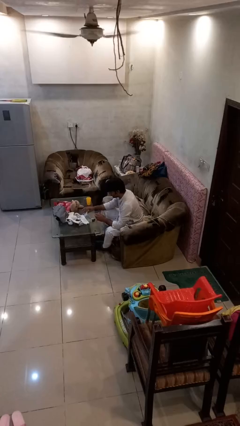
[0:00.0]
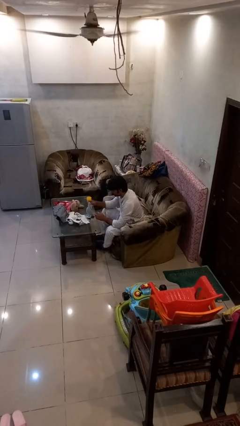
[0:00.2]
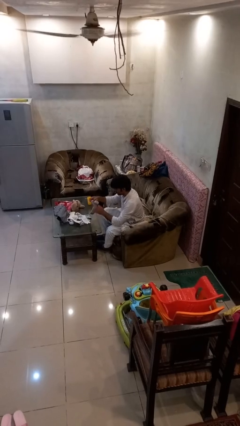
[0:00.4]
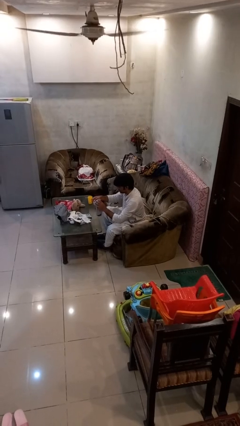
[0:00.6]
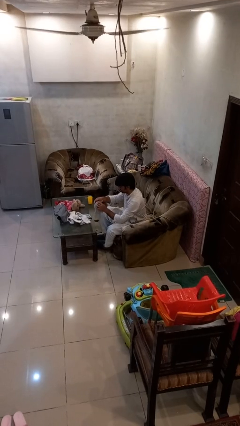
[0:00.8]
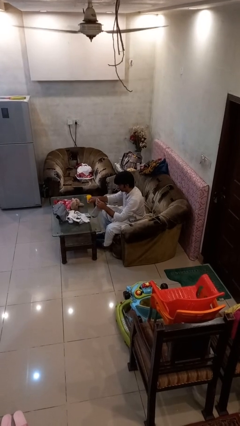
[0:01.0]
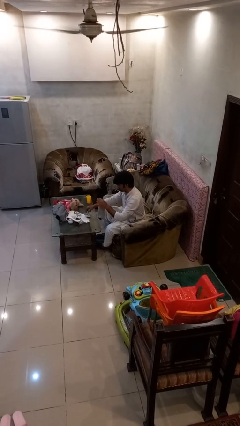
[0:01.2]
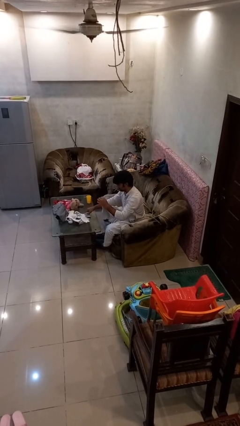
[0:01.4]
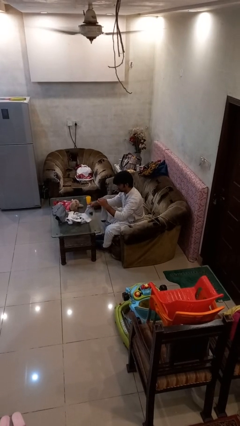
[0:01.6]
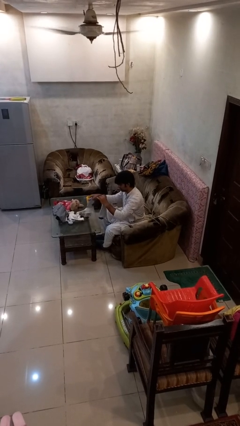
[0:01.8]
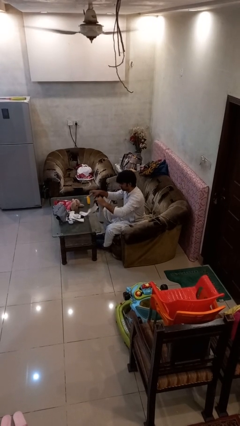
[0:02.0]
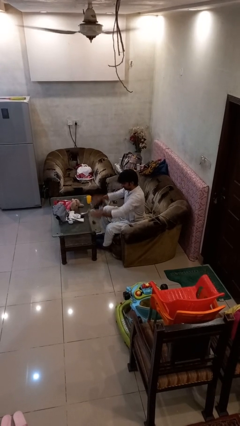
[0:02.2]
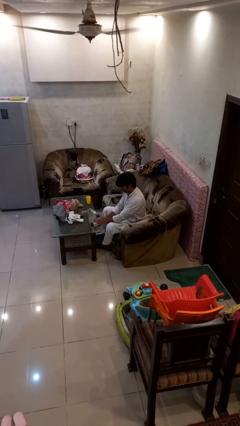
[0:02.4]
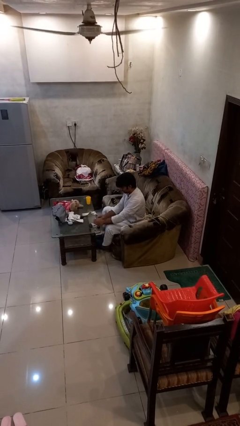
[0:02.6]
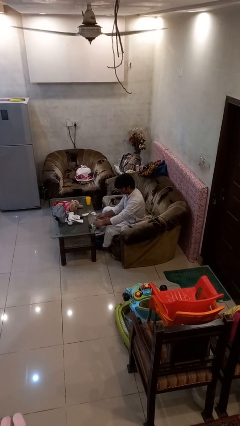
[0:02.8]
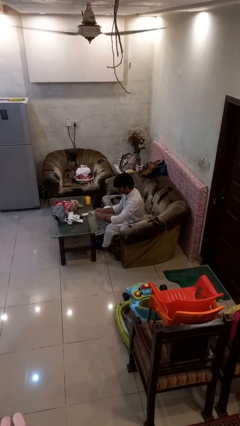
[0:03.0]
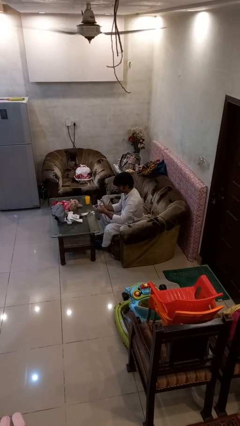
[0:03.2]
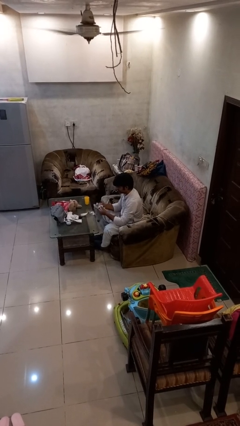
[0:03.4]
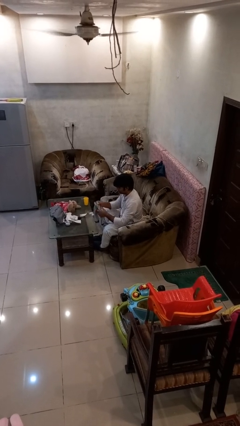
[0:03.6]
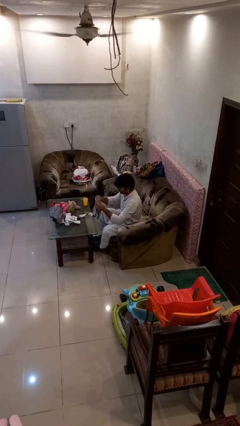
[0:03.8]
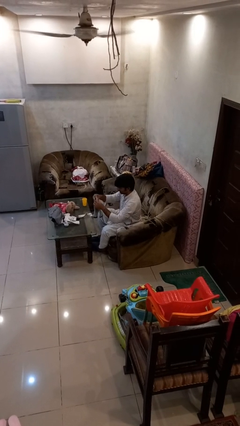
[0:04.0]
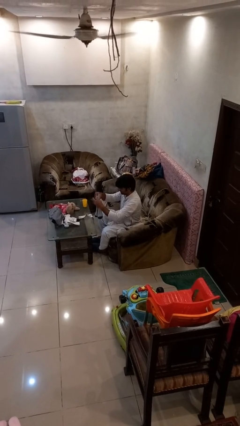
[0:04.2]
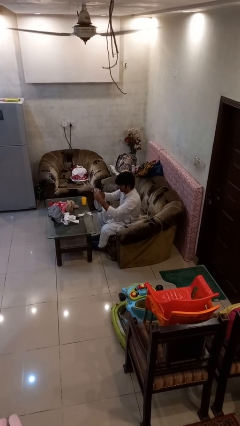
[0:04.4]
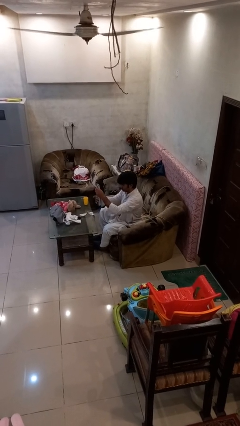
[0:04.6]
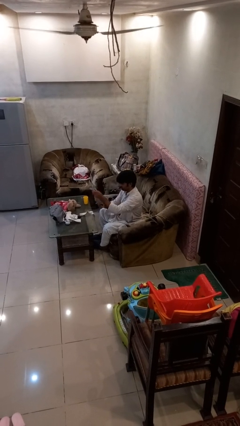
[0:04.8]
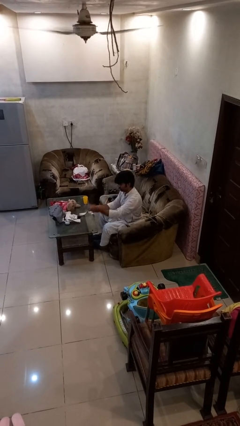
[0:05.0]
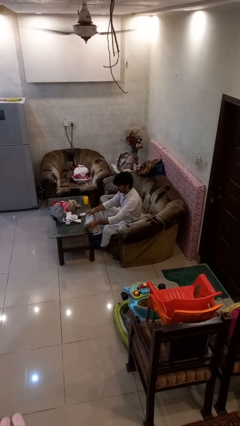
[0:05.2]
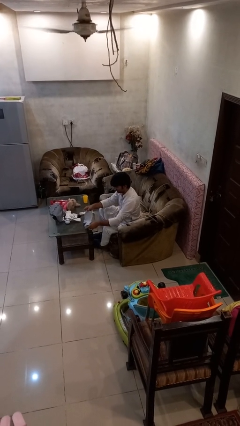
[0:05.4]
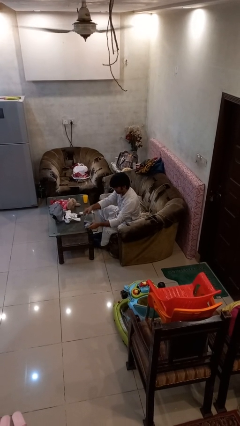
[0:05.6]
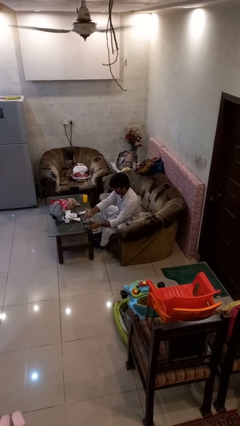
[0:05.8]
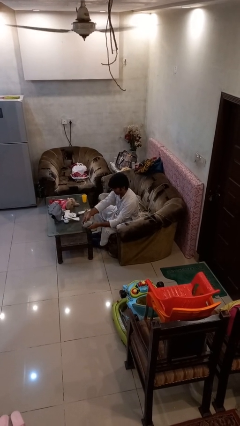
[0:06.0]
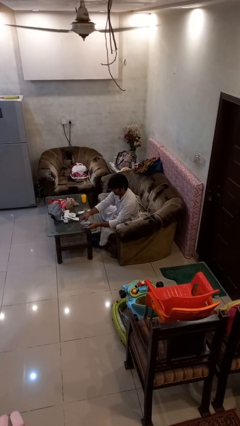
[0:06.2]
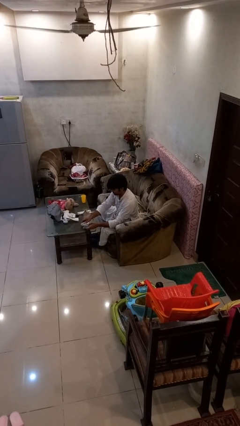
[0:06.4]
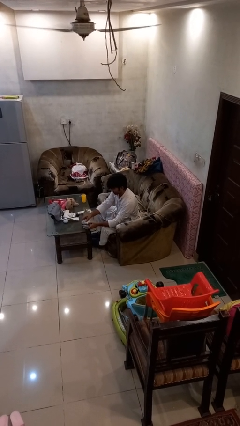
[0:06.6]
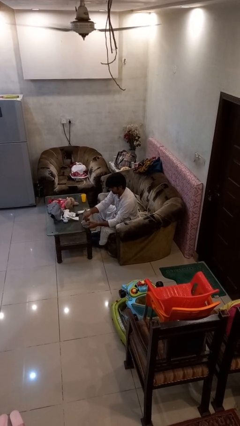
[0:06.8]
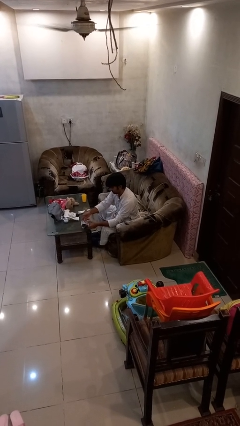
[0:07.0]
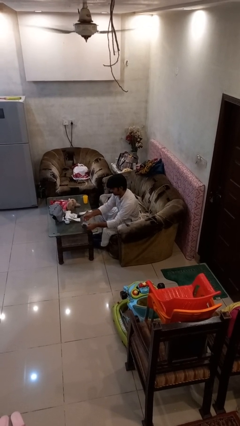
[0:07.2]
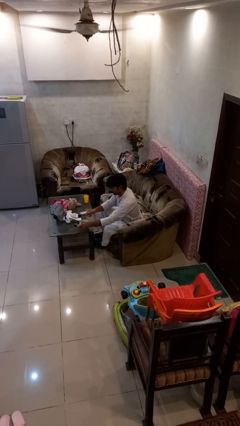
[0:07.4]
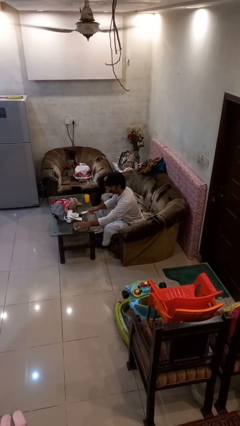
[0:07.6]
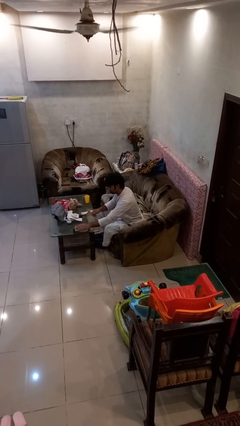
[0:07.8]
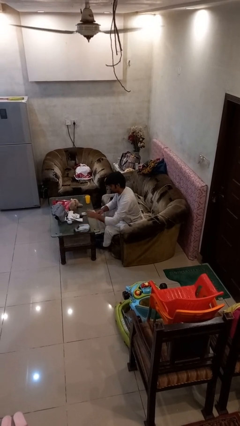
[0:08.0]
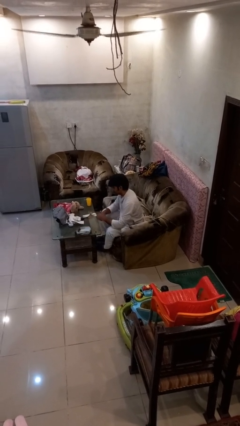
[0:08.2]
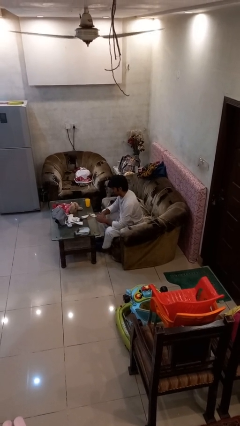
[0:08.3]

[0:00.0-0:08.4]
person folds socks

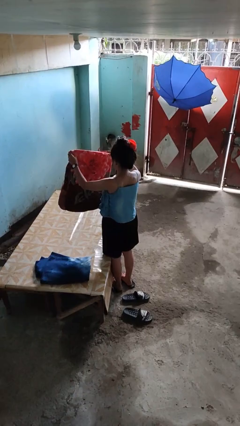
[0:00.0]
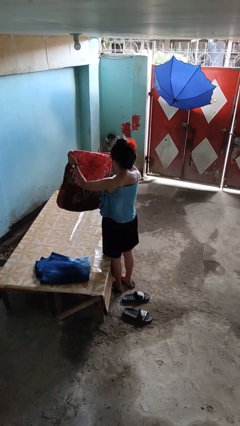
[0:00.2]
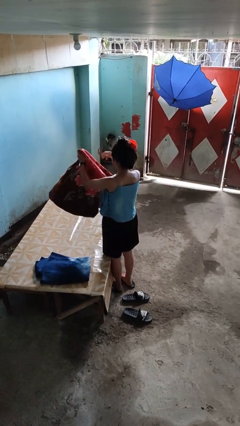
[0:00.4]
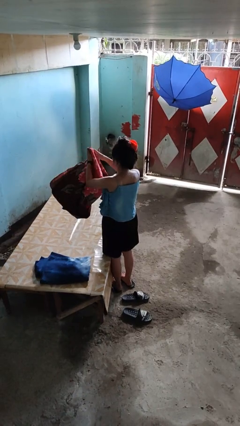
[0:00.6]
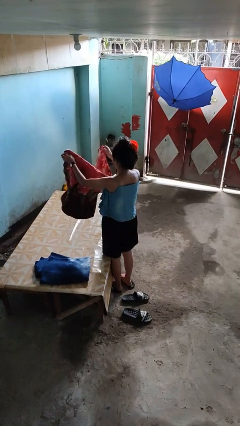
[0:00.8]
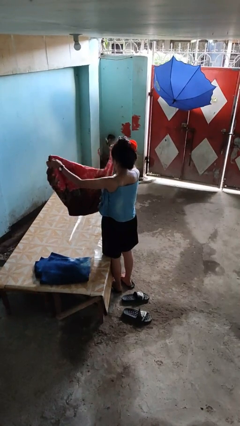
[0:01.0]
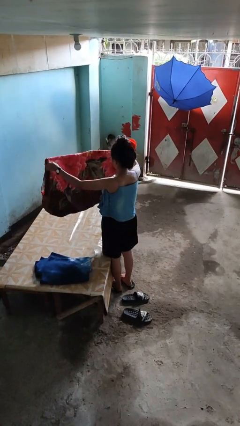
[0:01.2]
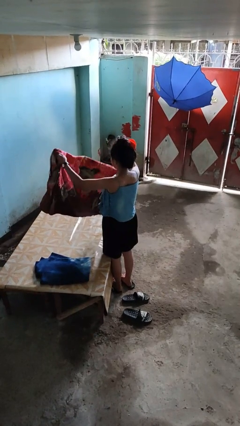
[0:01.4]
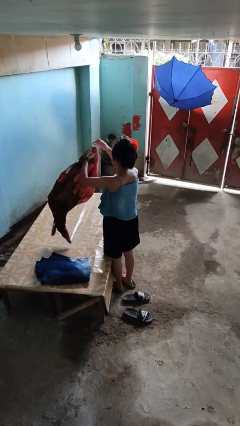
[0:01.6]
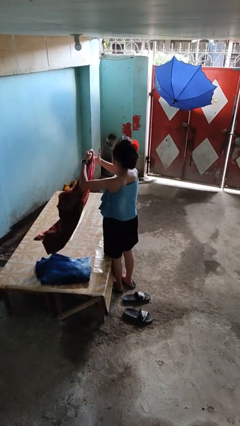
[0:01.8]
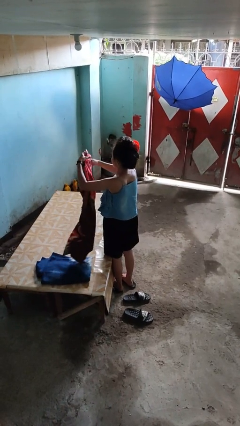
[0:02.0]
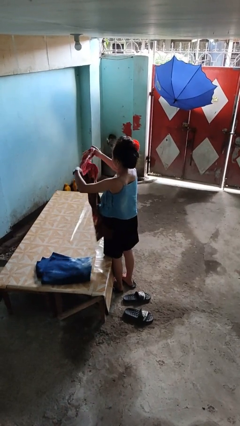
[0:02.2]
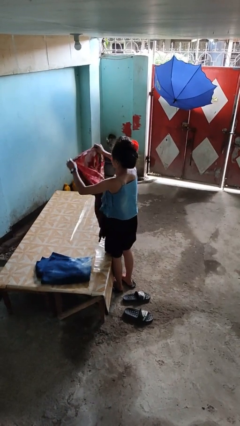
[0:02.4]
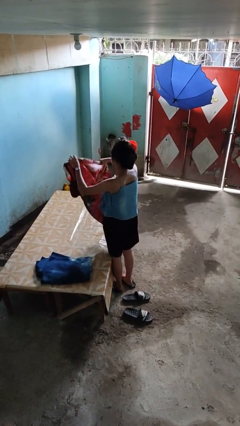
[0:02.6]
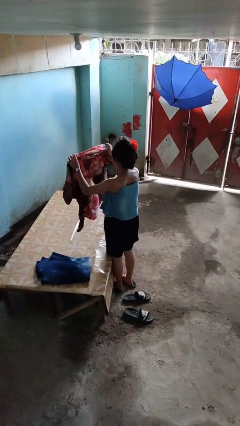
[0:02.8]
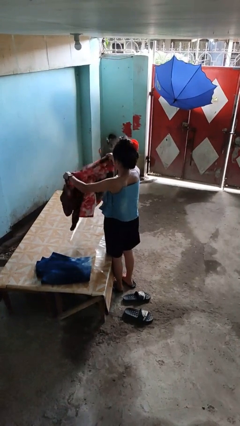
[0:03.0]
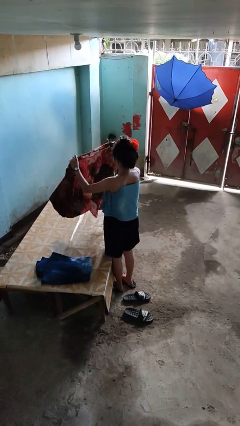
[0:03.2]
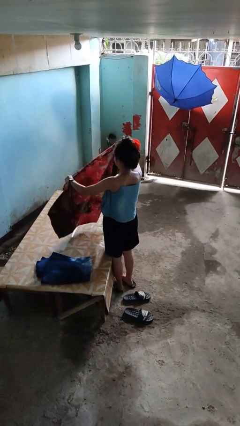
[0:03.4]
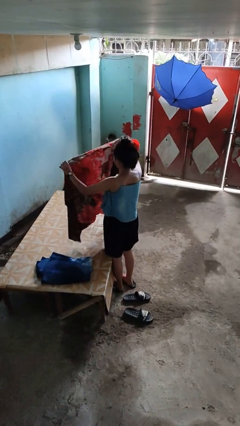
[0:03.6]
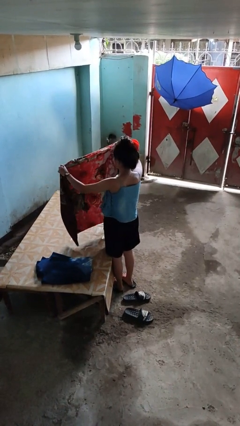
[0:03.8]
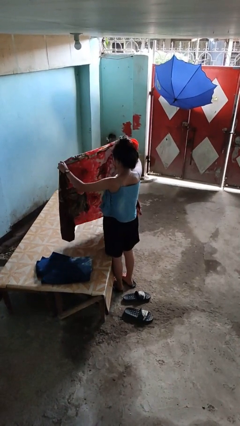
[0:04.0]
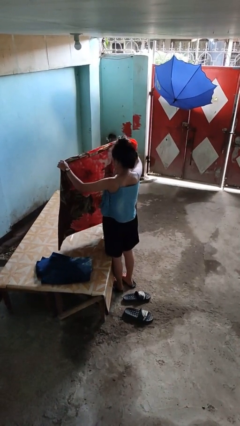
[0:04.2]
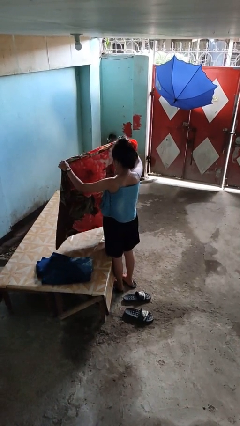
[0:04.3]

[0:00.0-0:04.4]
person unfolds blanket

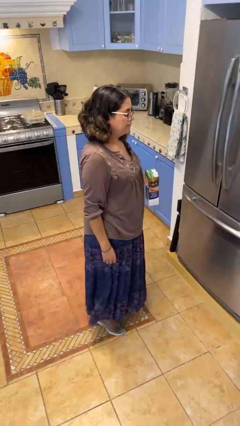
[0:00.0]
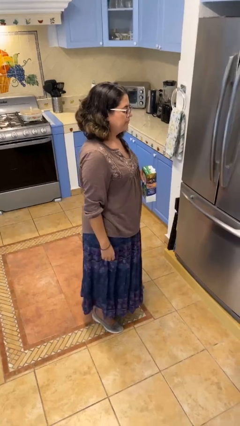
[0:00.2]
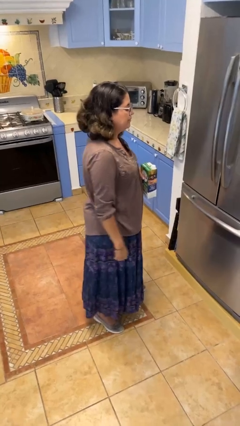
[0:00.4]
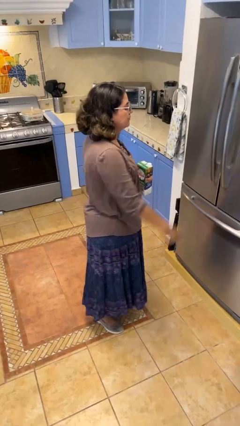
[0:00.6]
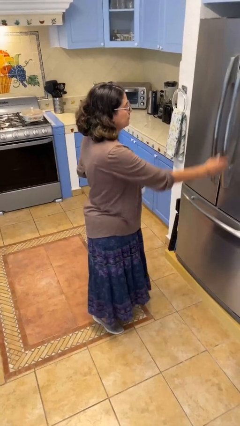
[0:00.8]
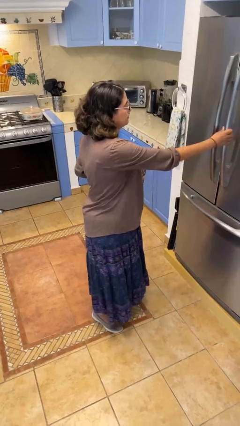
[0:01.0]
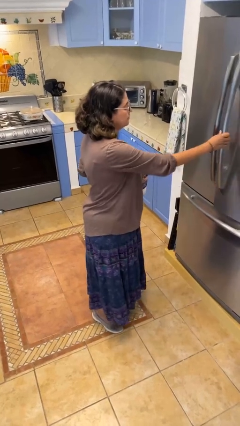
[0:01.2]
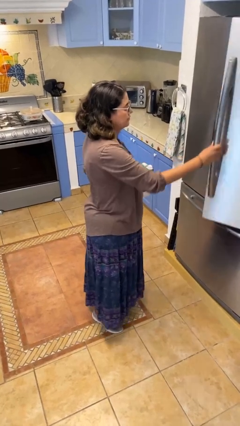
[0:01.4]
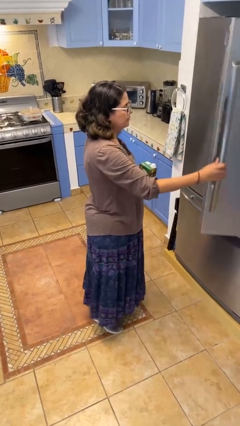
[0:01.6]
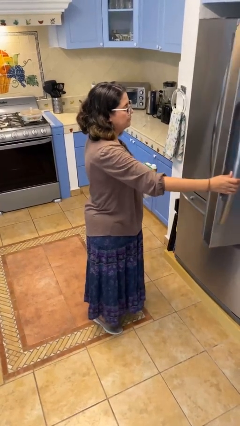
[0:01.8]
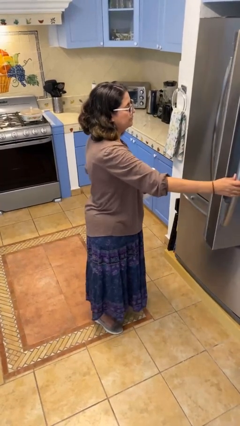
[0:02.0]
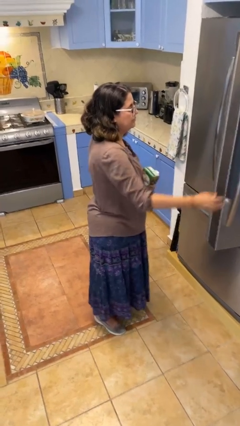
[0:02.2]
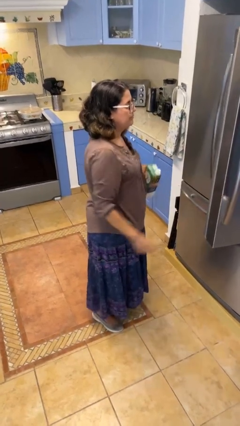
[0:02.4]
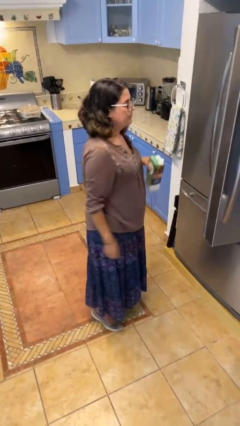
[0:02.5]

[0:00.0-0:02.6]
person opens refrigerator

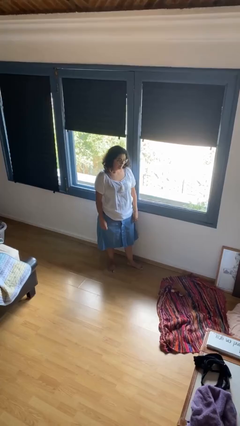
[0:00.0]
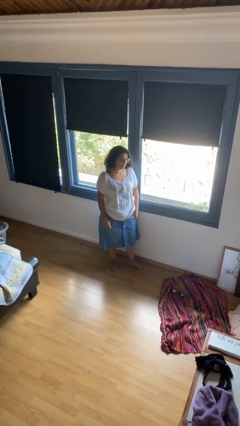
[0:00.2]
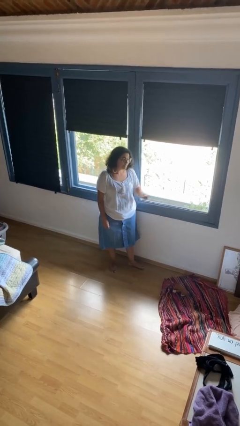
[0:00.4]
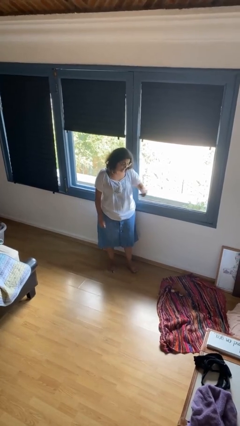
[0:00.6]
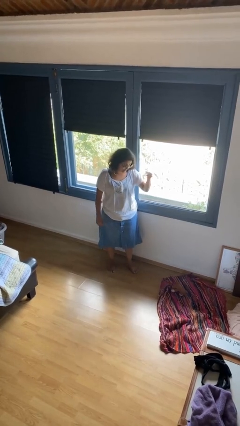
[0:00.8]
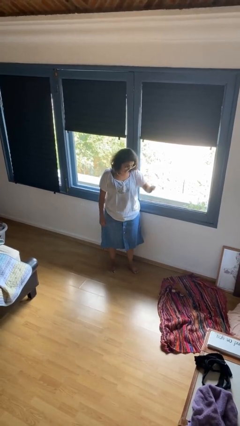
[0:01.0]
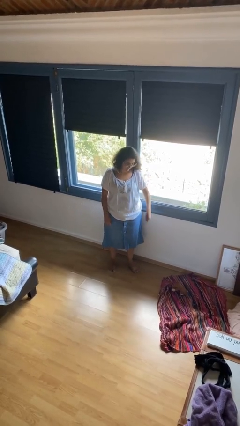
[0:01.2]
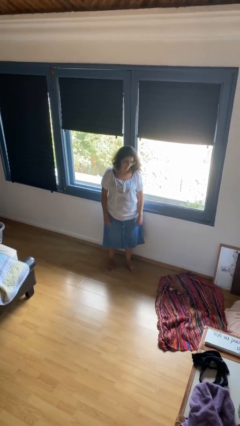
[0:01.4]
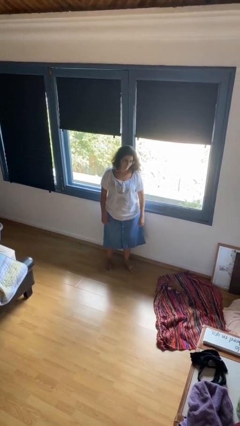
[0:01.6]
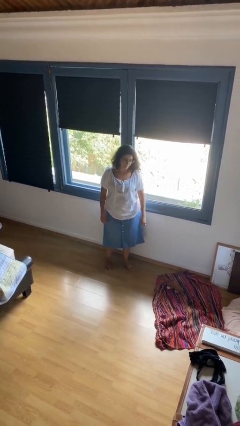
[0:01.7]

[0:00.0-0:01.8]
person snaps fingers

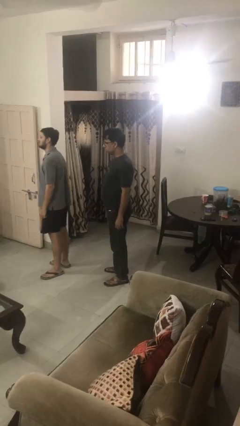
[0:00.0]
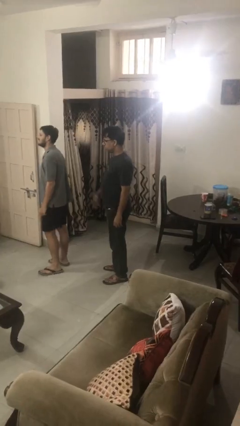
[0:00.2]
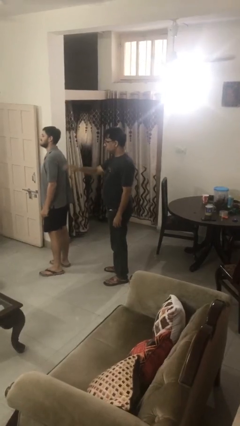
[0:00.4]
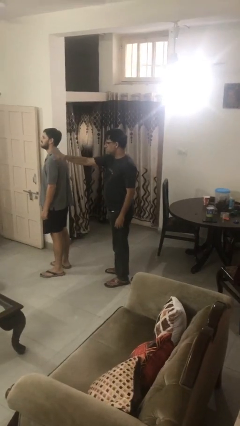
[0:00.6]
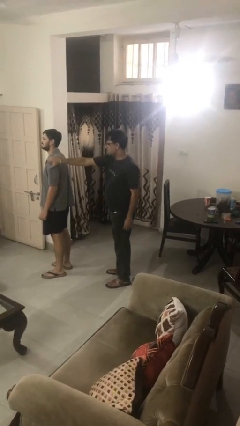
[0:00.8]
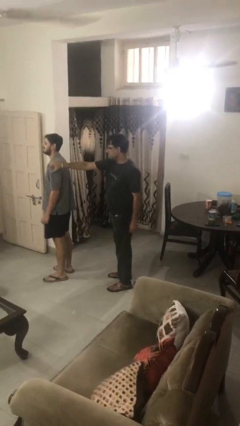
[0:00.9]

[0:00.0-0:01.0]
person grabs person by shoulder
